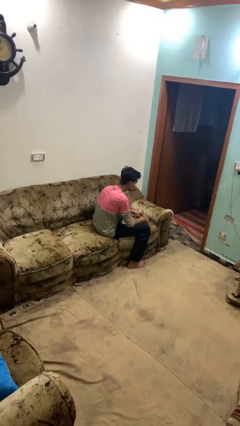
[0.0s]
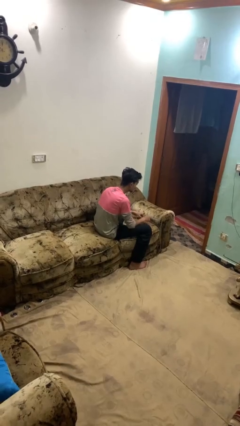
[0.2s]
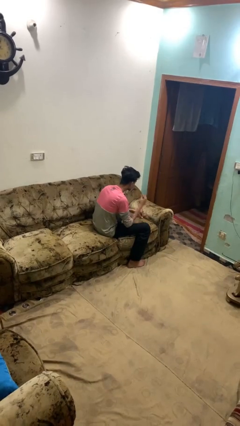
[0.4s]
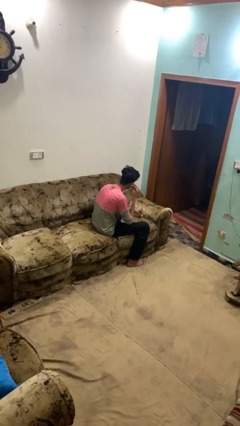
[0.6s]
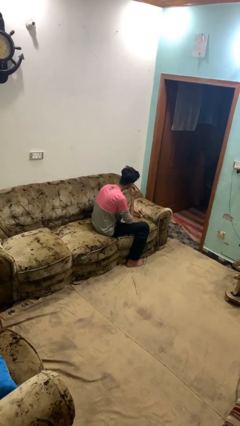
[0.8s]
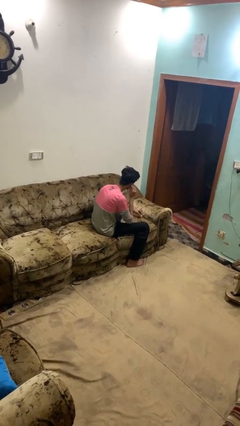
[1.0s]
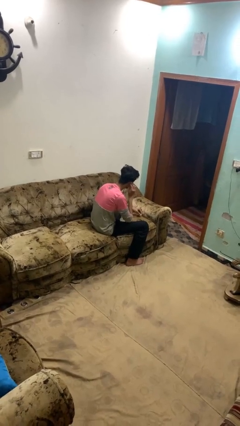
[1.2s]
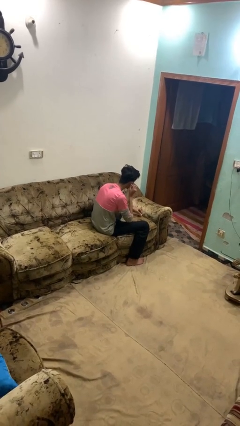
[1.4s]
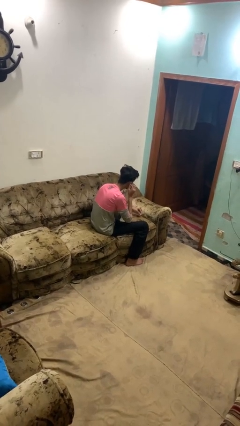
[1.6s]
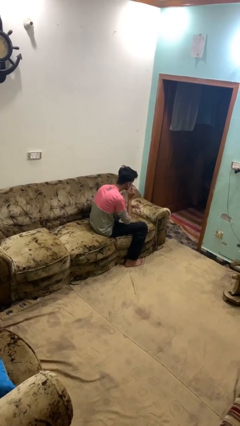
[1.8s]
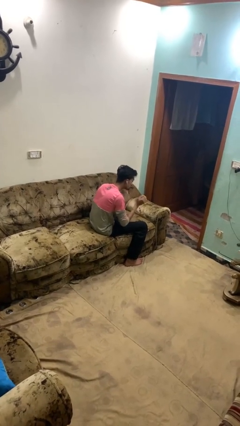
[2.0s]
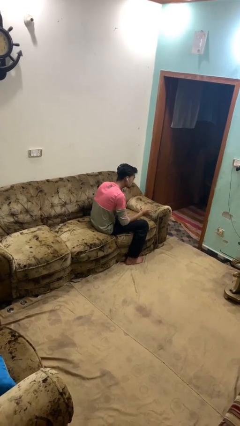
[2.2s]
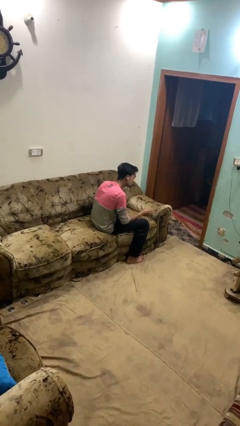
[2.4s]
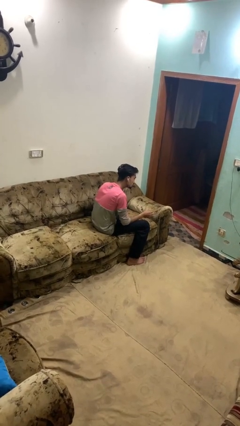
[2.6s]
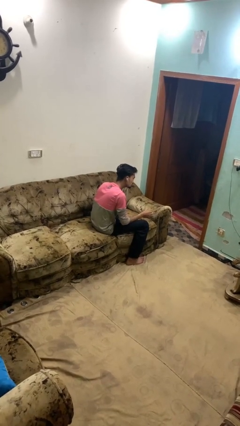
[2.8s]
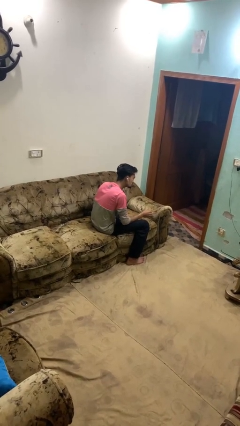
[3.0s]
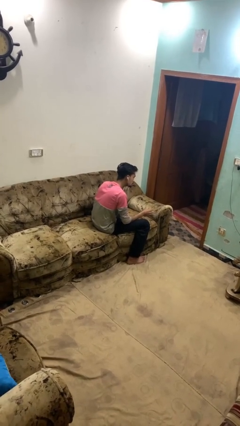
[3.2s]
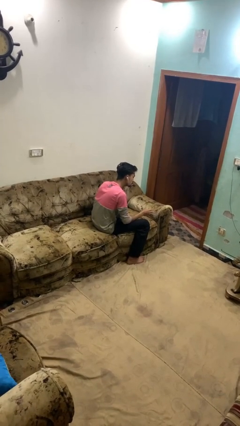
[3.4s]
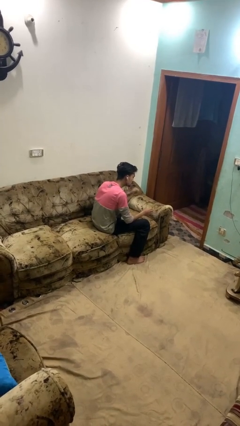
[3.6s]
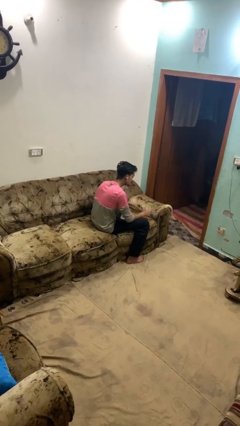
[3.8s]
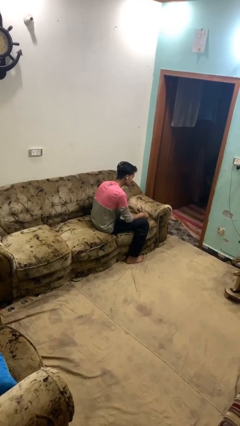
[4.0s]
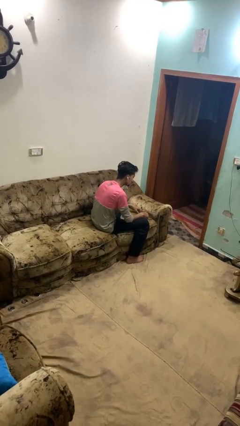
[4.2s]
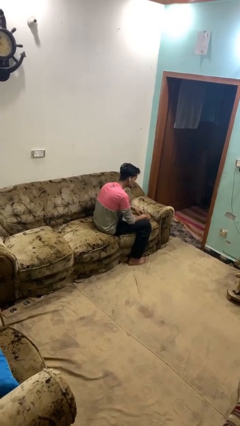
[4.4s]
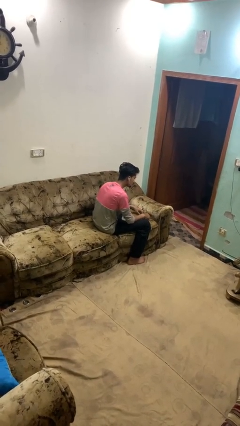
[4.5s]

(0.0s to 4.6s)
person puts on headphones

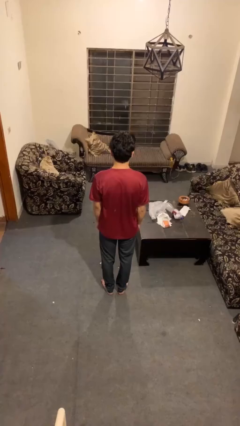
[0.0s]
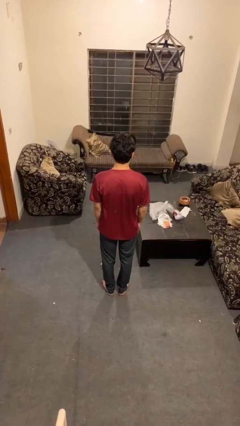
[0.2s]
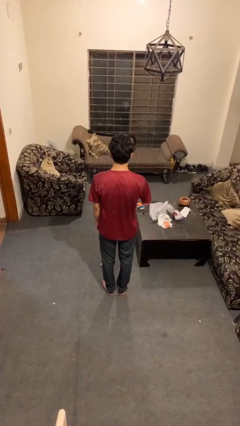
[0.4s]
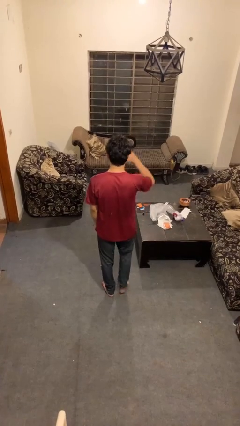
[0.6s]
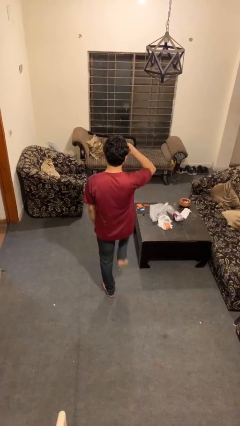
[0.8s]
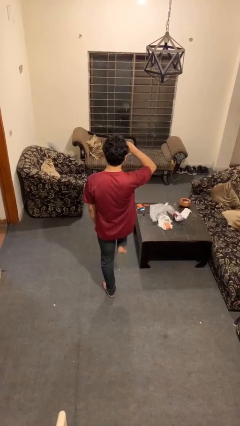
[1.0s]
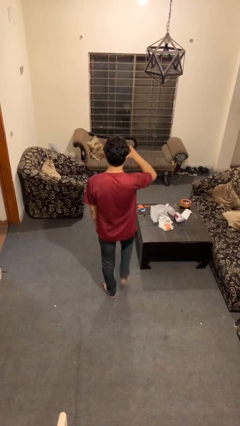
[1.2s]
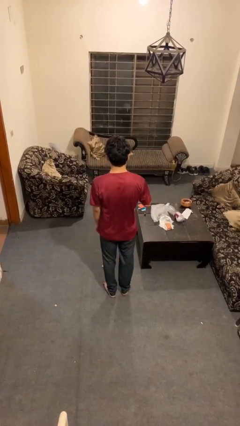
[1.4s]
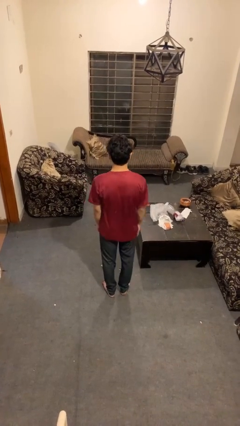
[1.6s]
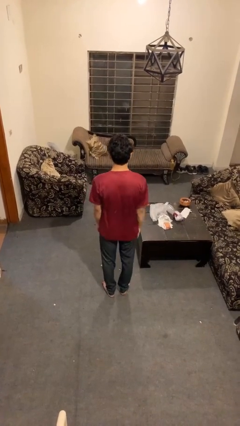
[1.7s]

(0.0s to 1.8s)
person salutes

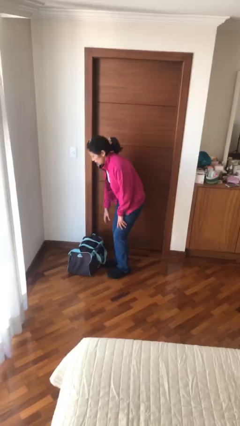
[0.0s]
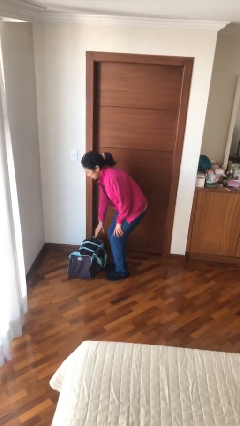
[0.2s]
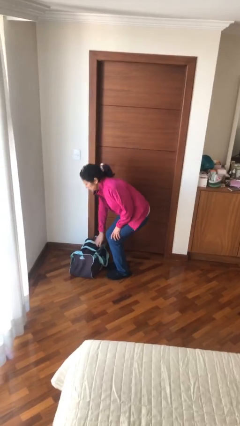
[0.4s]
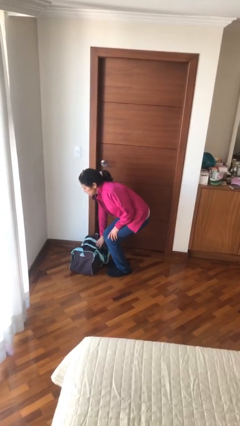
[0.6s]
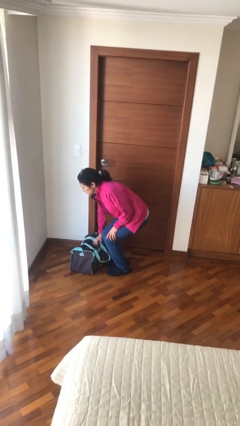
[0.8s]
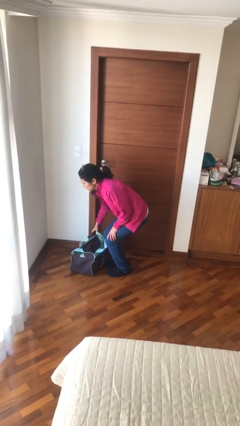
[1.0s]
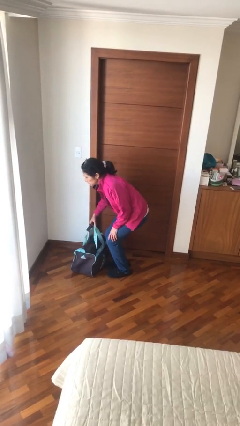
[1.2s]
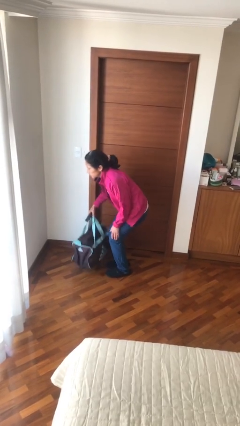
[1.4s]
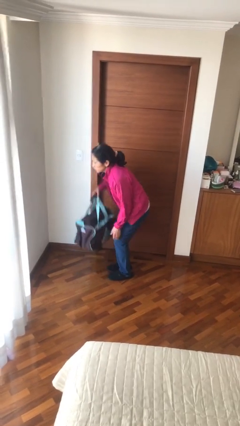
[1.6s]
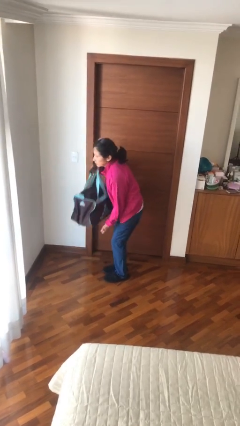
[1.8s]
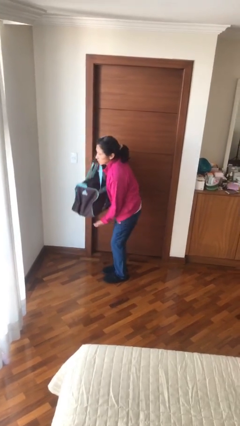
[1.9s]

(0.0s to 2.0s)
person picks up object from floor

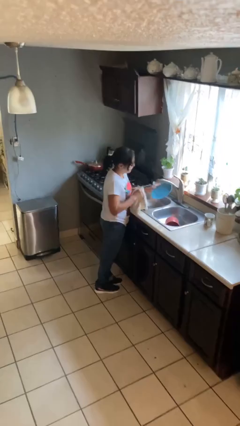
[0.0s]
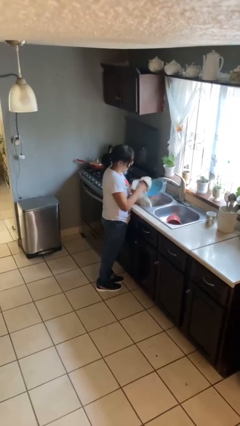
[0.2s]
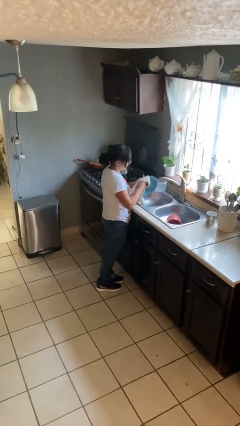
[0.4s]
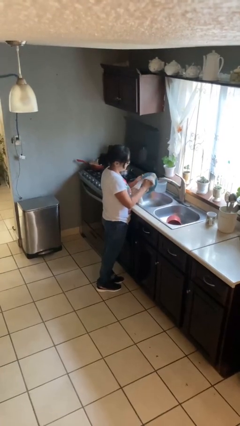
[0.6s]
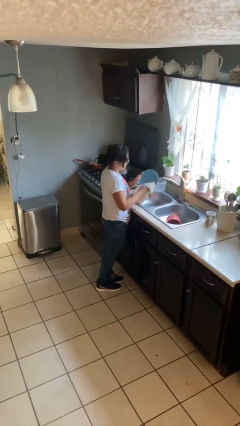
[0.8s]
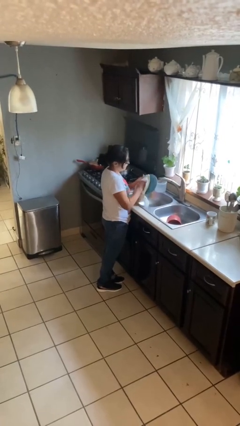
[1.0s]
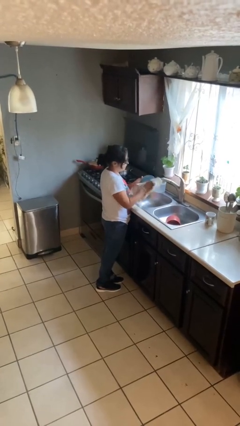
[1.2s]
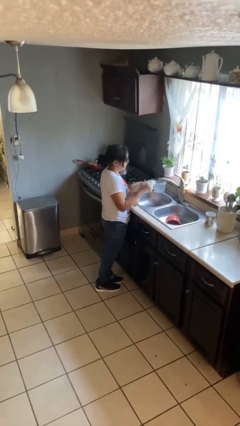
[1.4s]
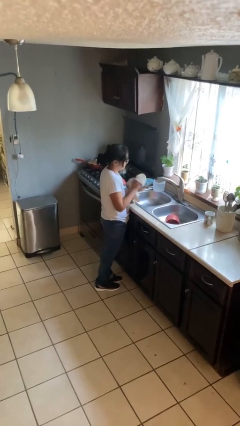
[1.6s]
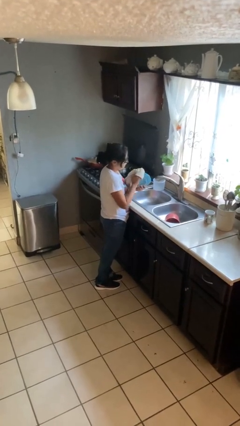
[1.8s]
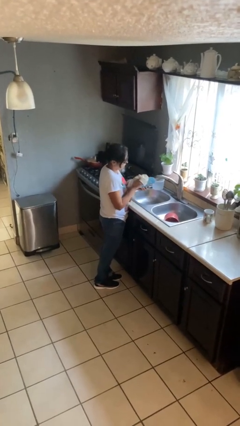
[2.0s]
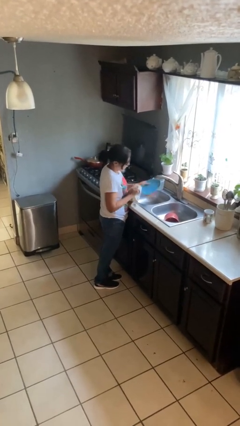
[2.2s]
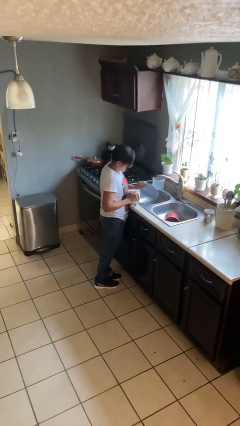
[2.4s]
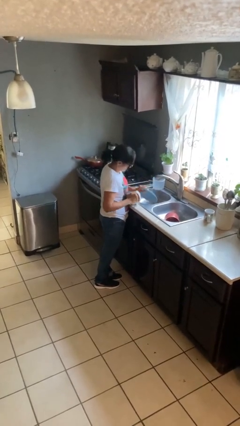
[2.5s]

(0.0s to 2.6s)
person dries dish

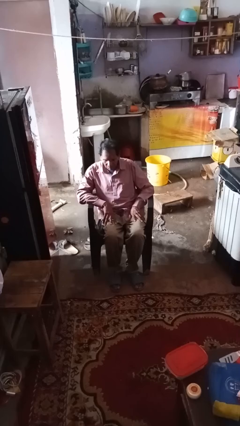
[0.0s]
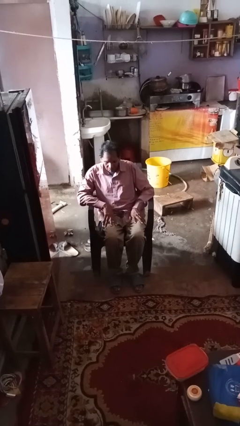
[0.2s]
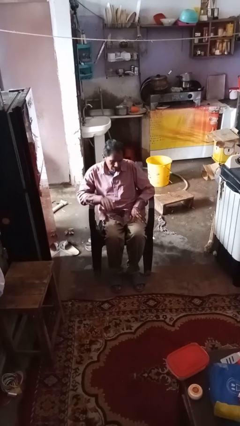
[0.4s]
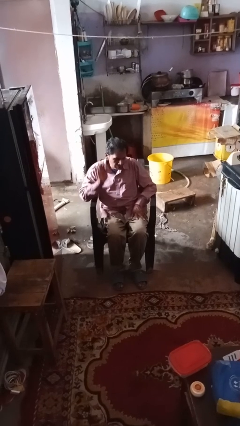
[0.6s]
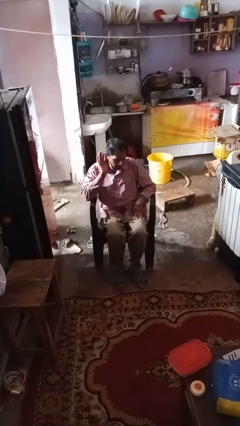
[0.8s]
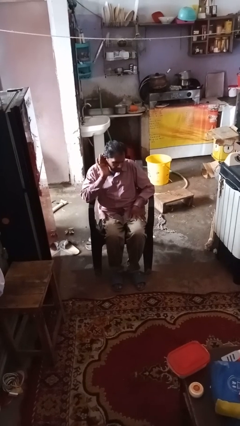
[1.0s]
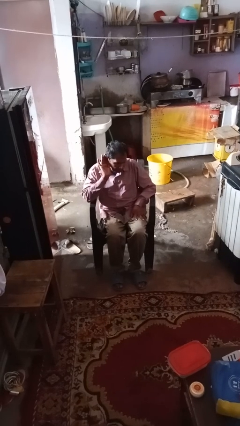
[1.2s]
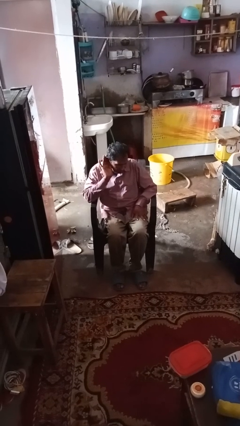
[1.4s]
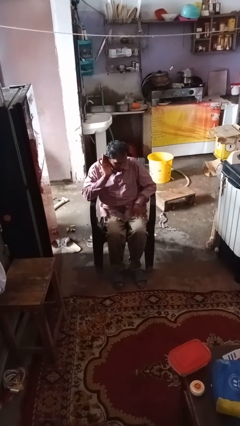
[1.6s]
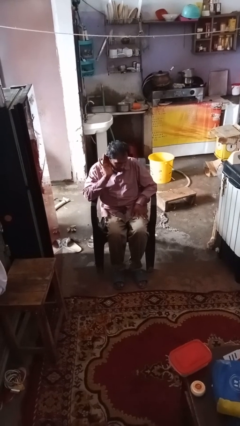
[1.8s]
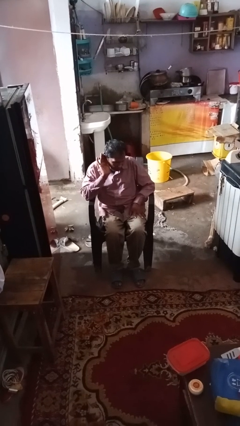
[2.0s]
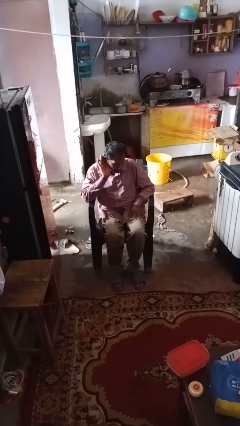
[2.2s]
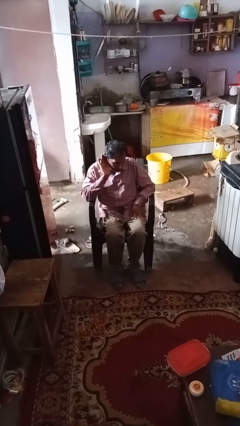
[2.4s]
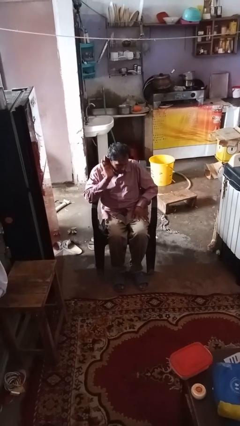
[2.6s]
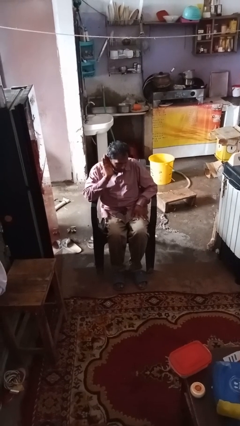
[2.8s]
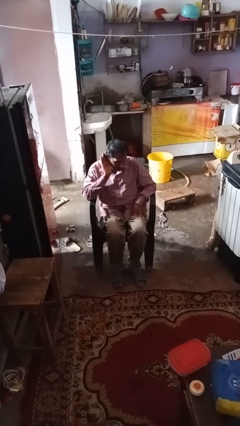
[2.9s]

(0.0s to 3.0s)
person gestures listen closely

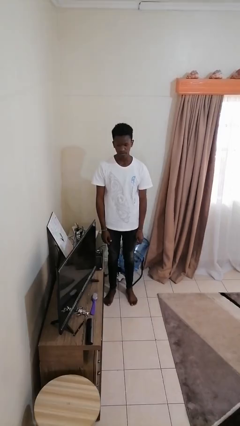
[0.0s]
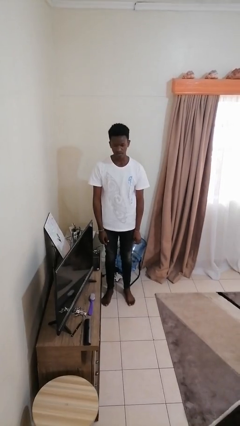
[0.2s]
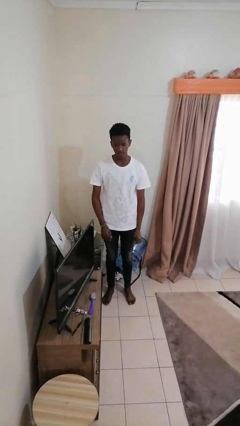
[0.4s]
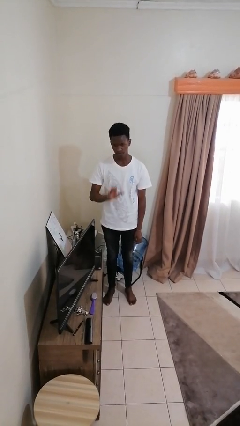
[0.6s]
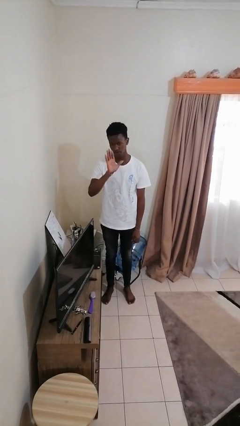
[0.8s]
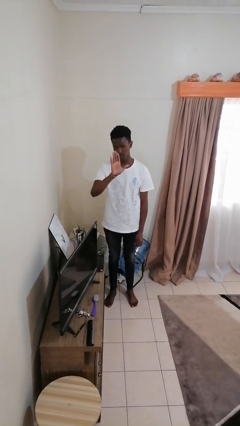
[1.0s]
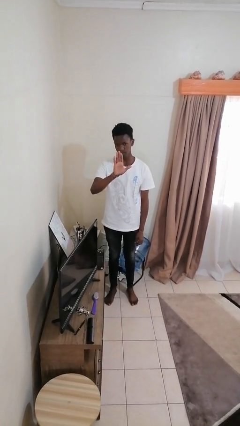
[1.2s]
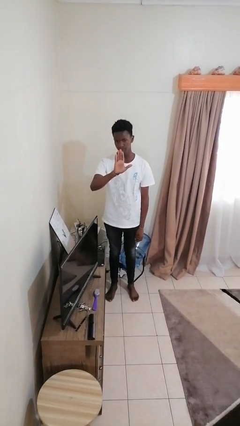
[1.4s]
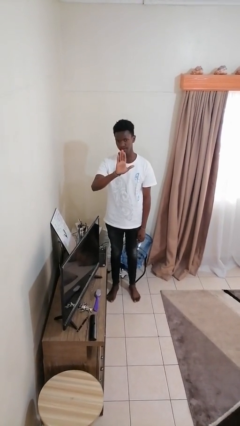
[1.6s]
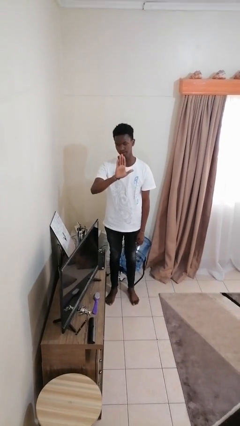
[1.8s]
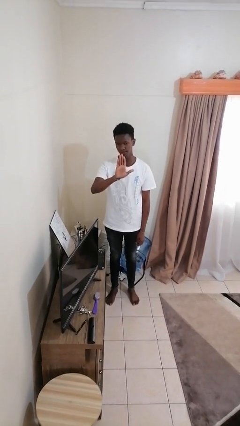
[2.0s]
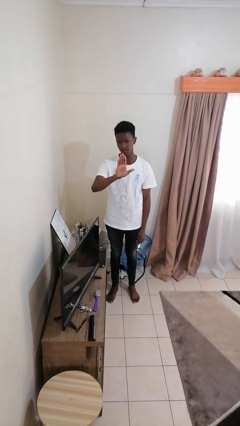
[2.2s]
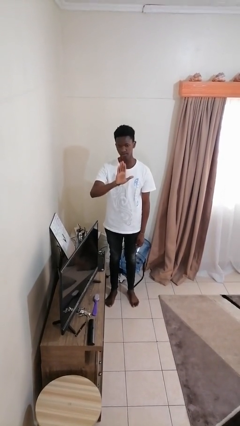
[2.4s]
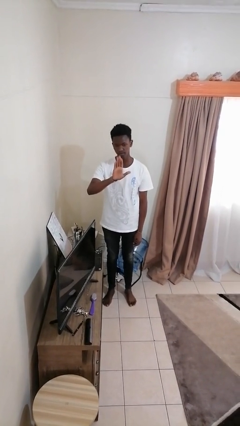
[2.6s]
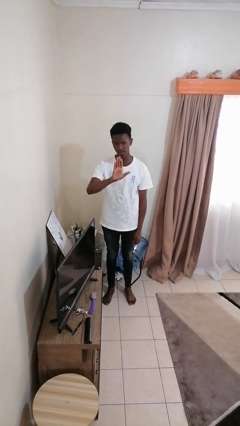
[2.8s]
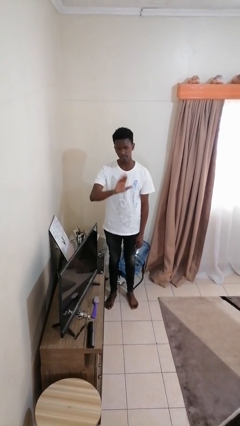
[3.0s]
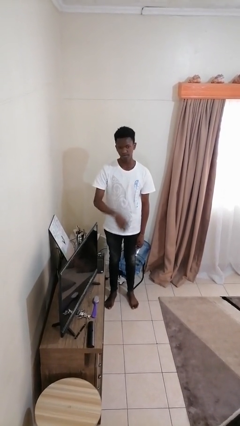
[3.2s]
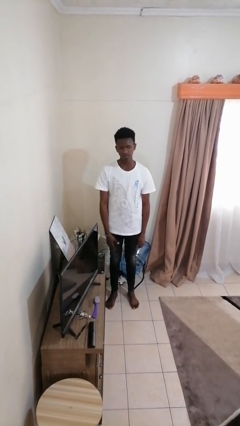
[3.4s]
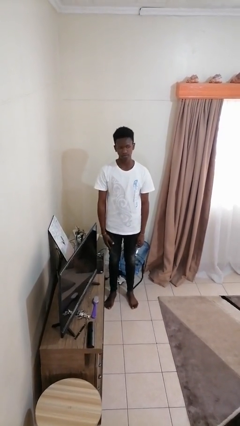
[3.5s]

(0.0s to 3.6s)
person gestures stop
